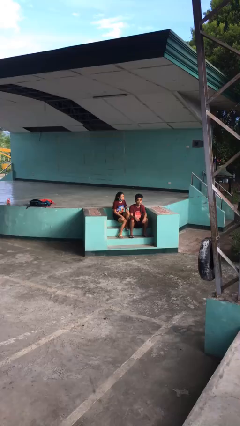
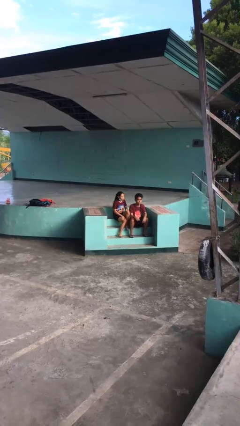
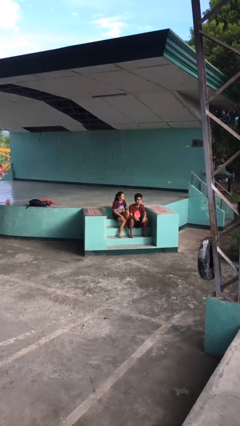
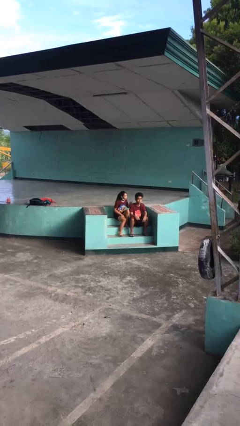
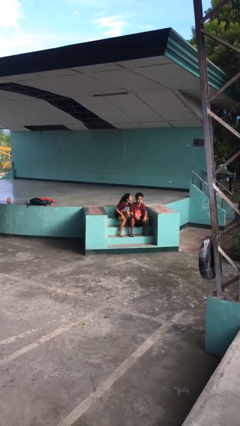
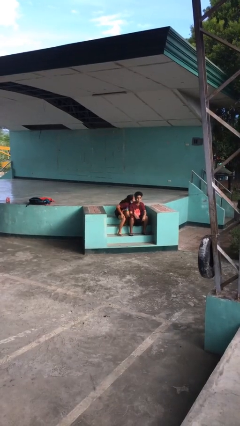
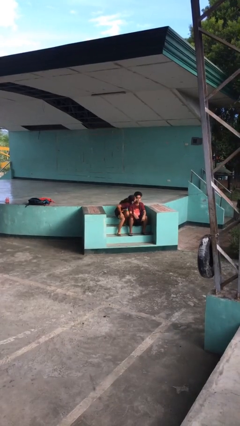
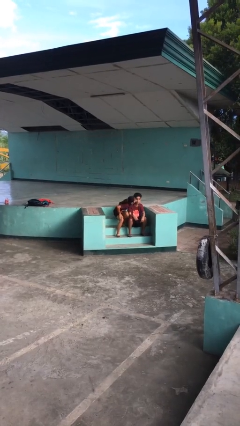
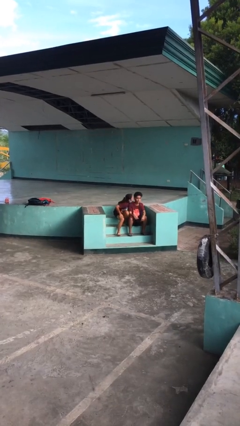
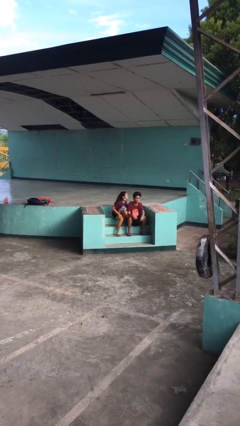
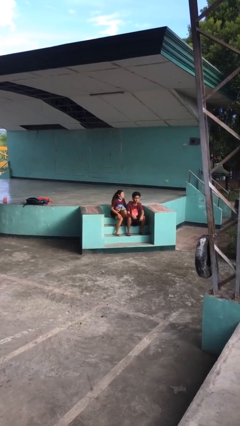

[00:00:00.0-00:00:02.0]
person kisses cheek of person

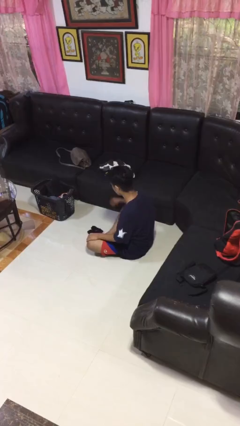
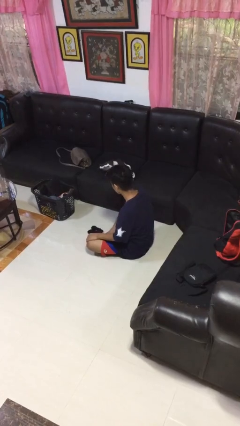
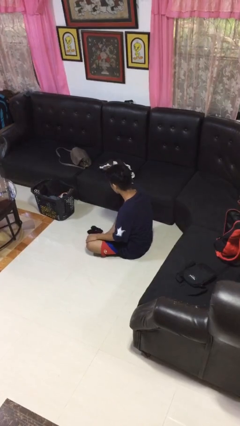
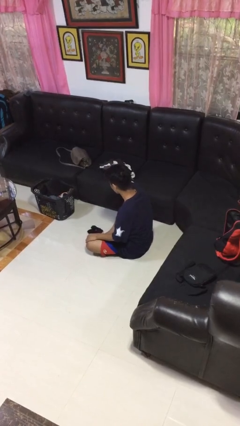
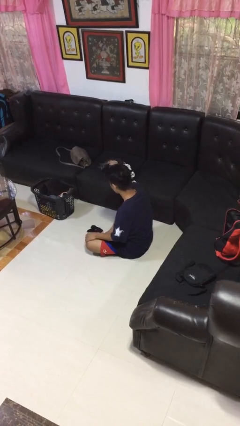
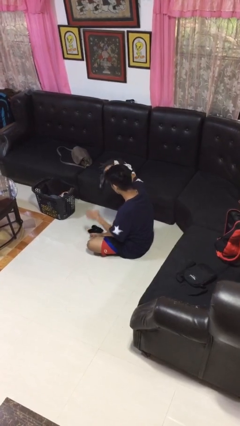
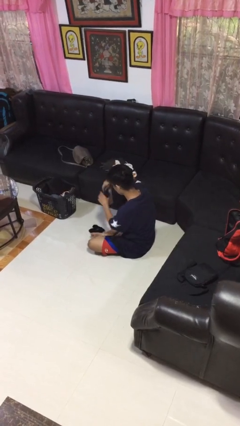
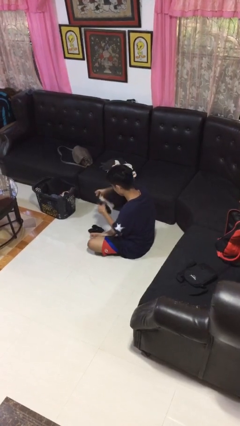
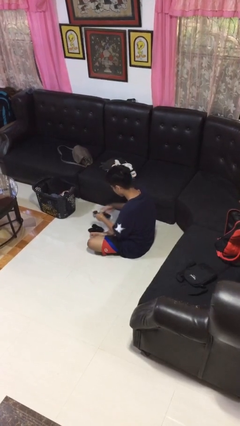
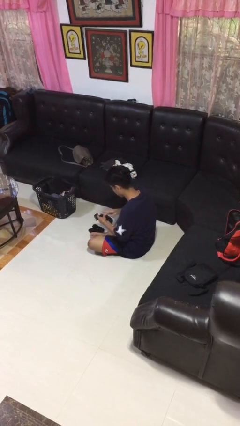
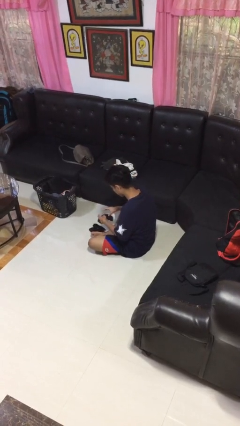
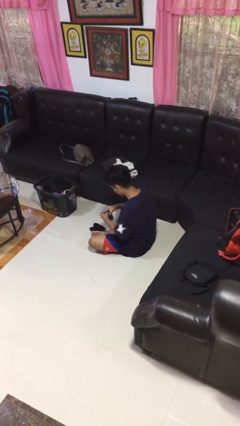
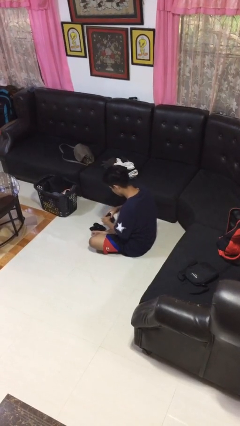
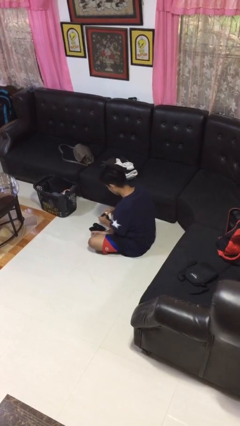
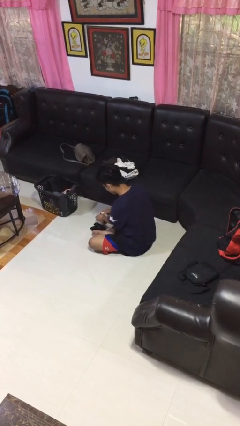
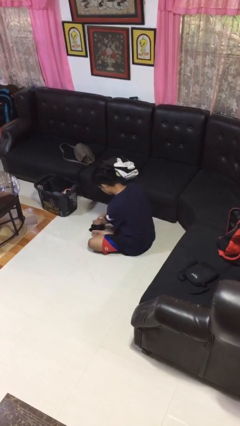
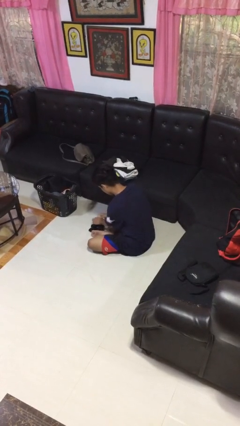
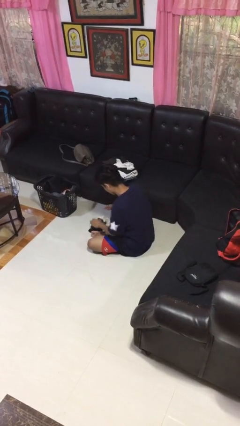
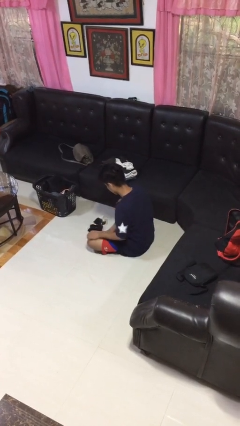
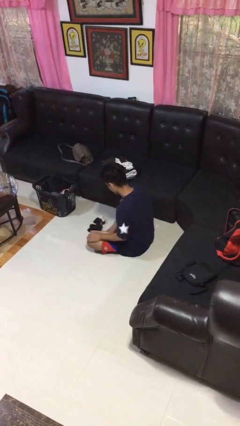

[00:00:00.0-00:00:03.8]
person folds socks

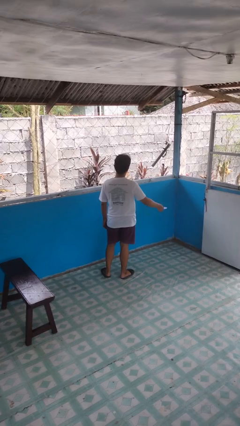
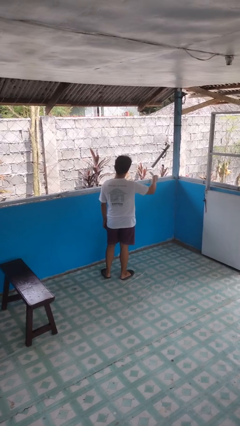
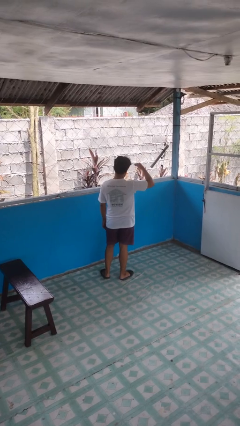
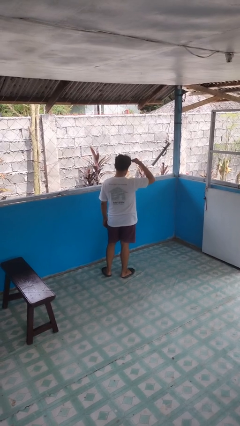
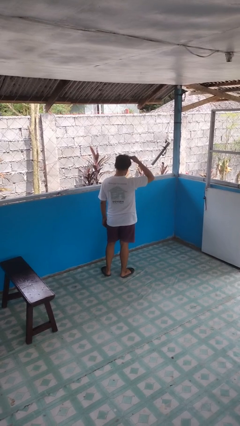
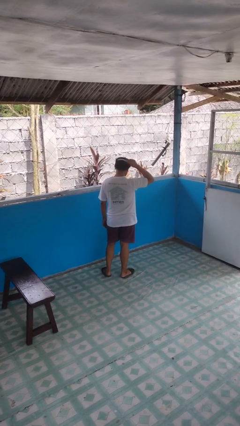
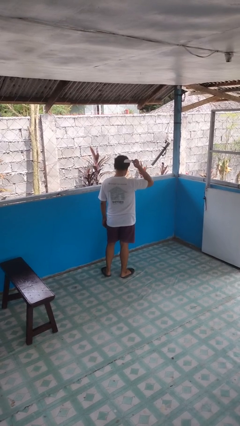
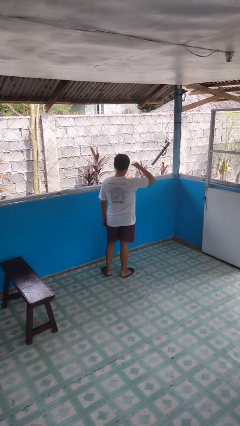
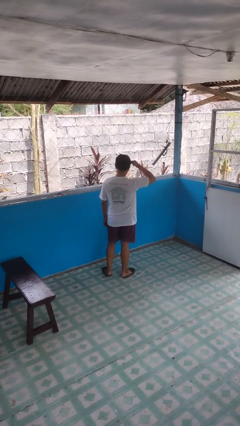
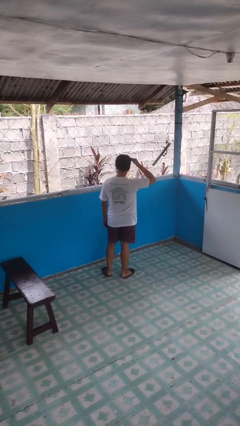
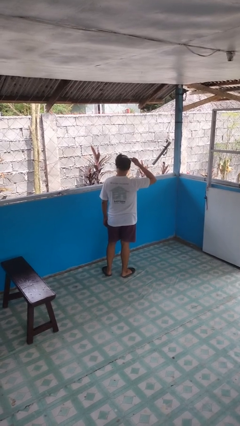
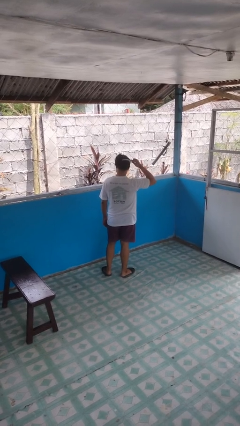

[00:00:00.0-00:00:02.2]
person brushes hair

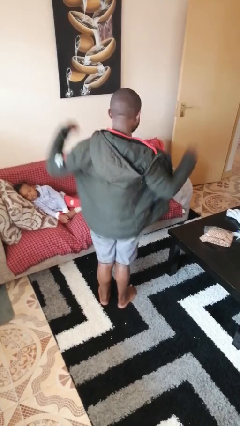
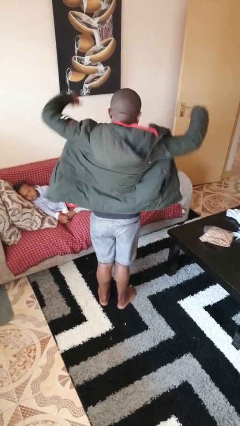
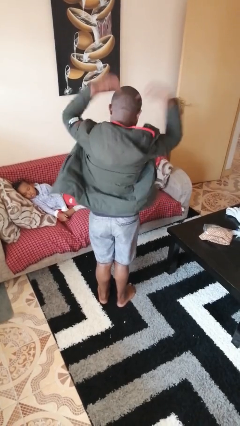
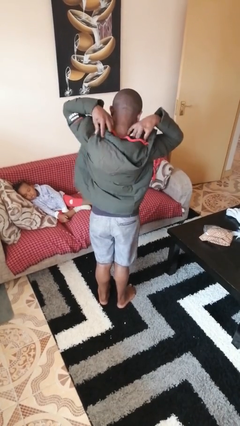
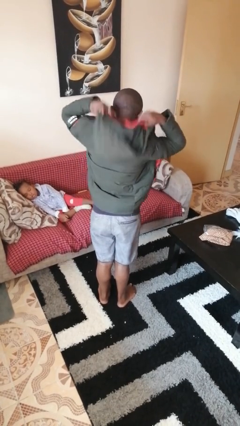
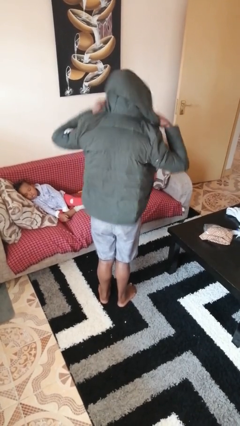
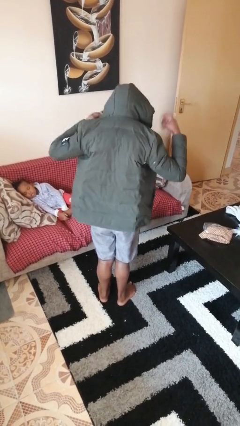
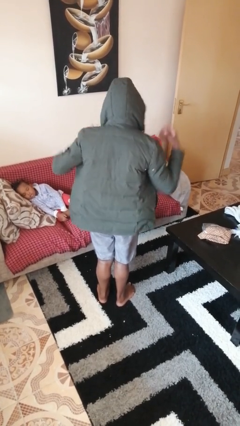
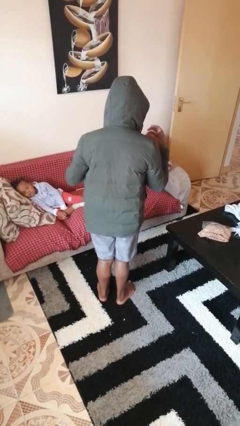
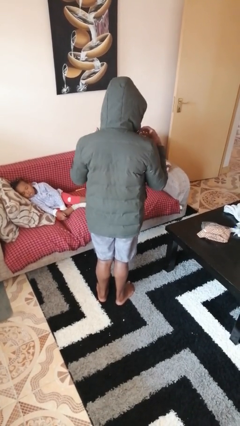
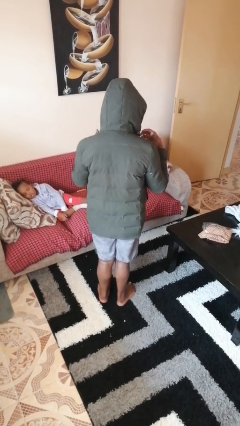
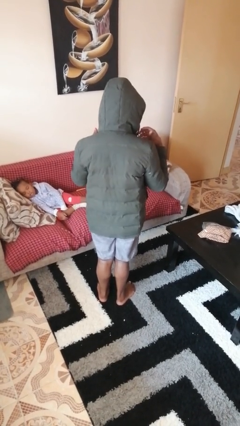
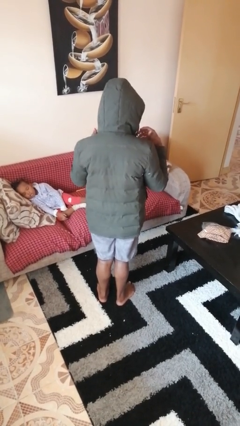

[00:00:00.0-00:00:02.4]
person puts on hoodie

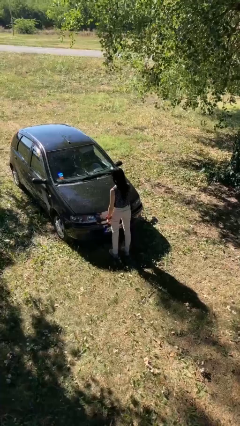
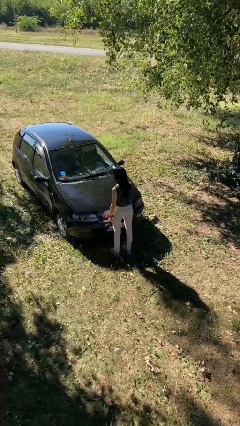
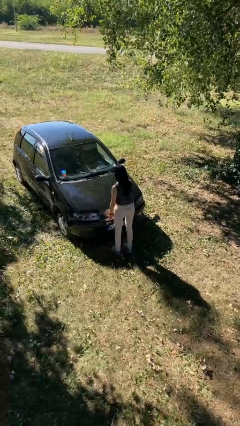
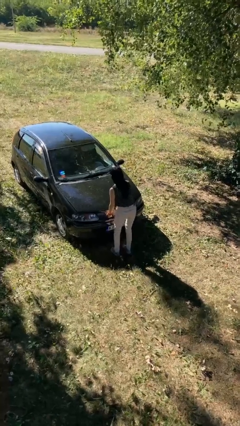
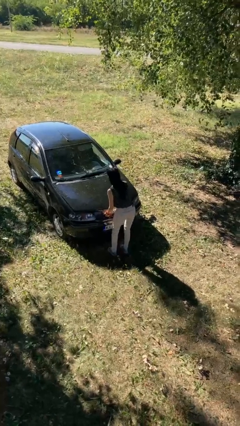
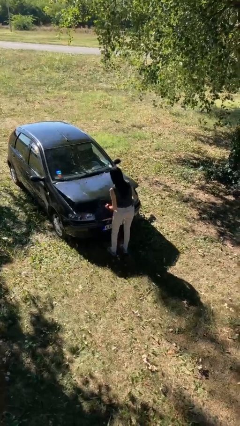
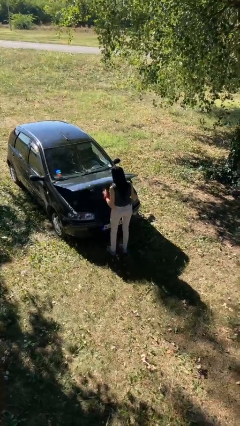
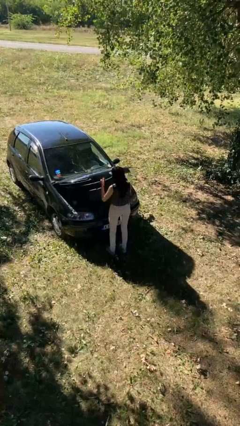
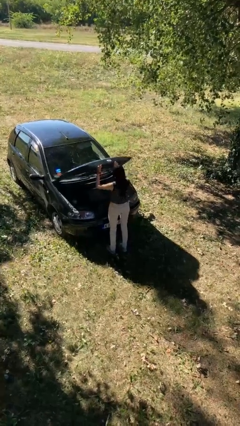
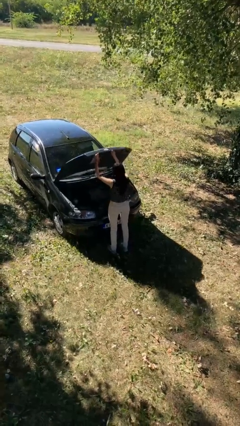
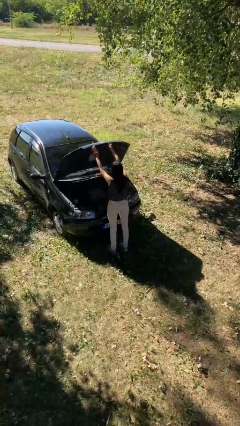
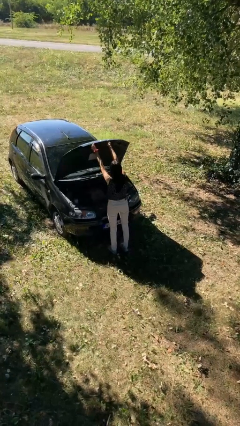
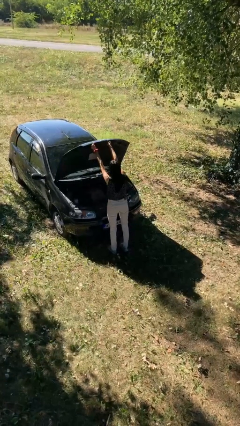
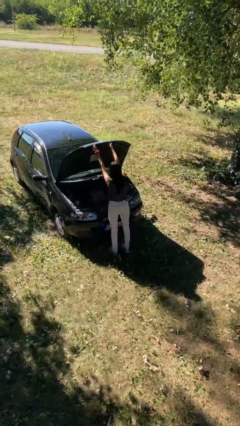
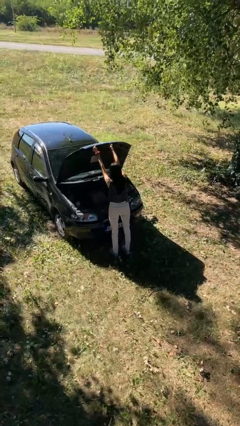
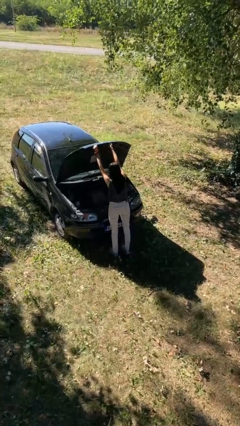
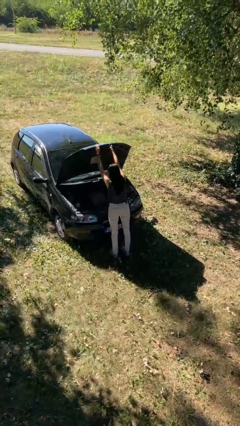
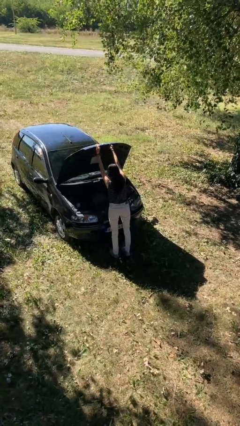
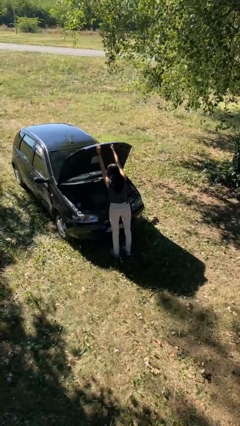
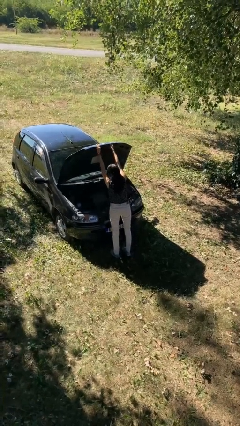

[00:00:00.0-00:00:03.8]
person opens car hood

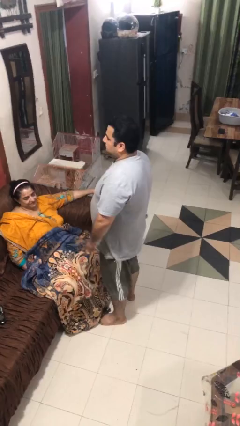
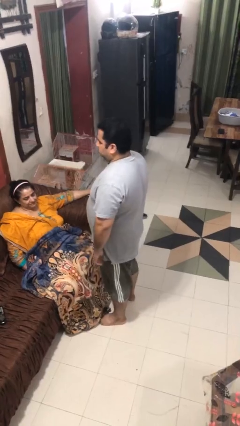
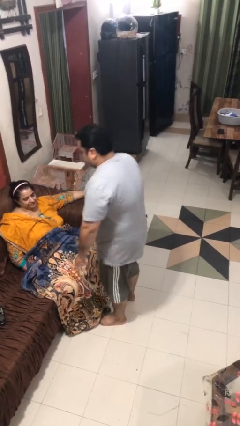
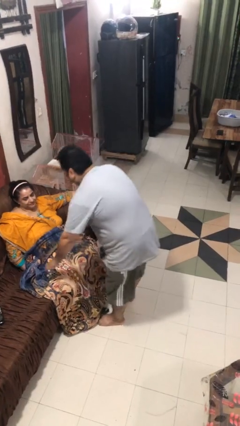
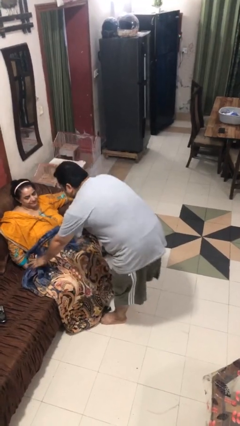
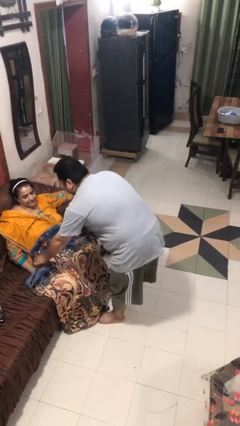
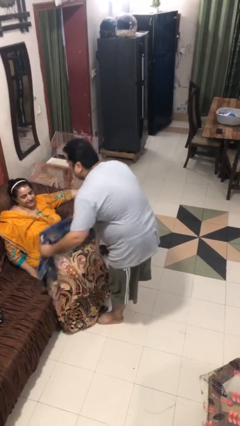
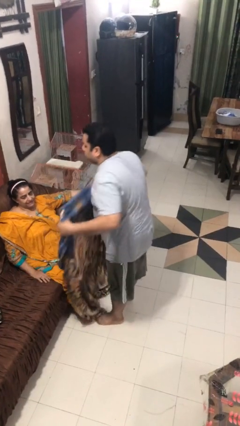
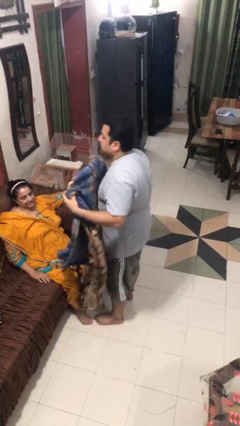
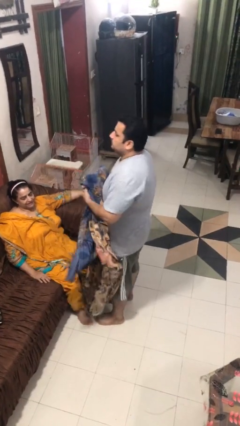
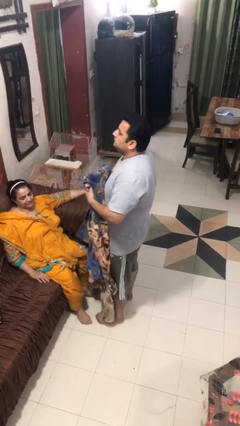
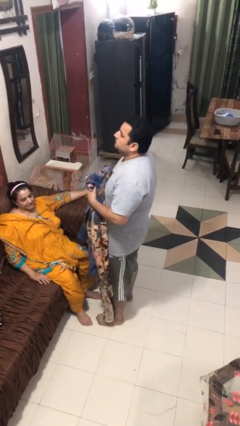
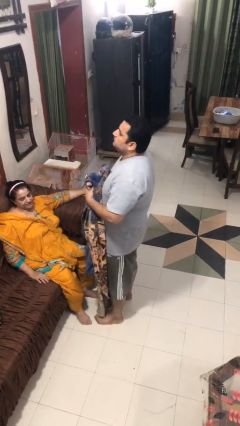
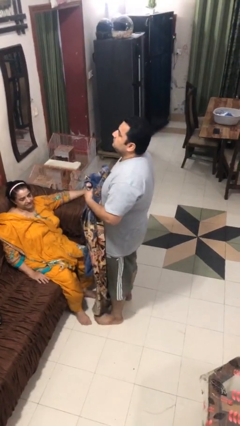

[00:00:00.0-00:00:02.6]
person uncovers friend with blanket

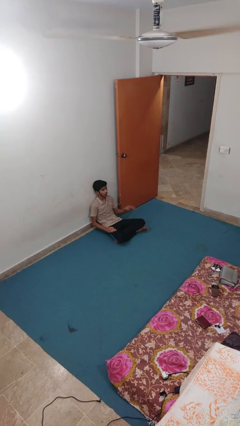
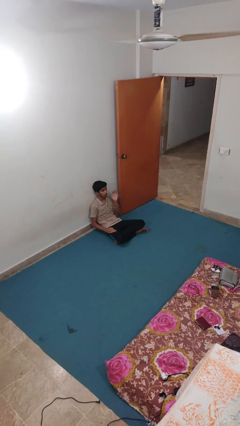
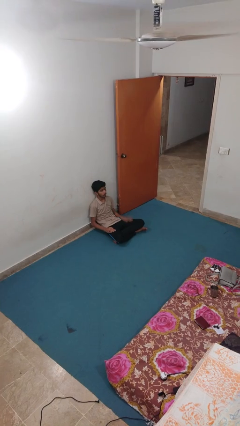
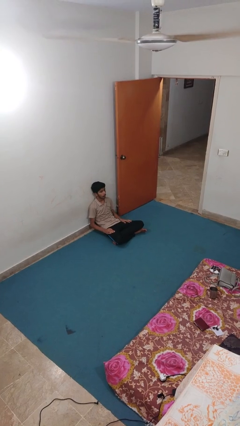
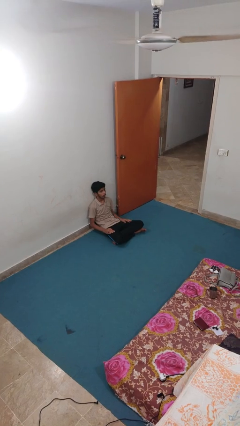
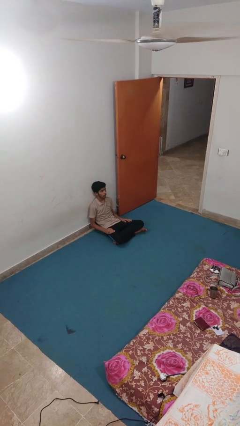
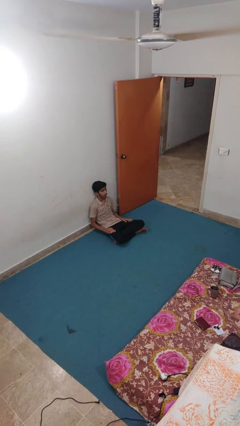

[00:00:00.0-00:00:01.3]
person slaps hands on thighs
